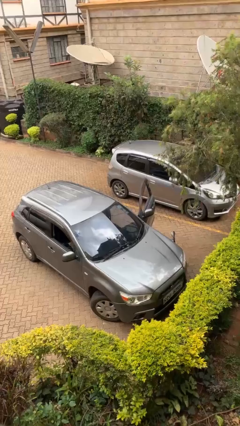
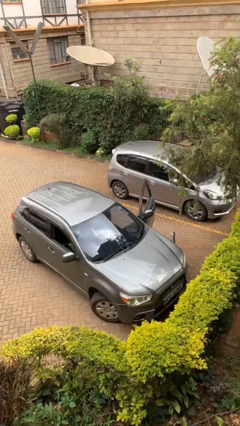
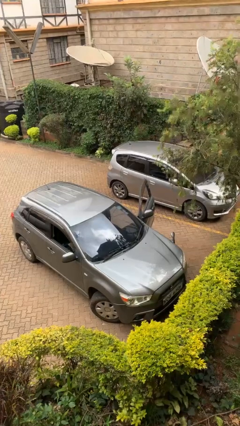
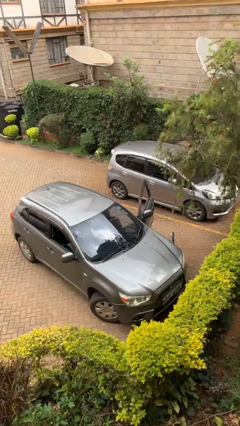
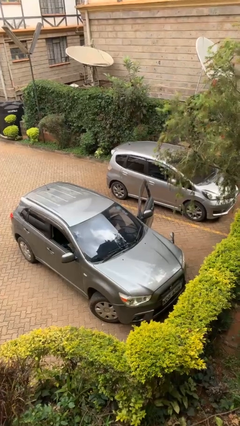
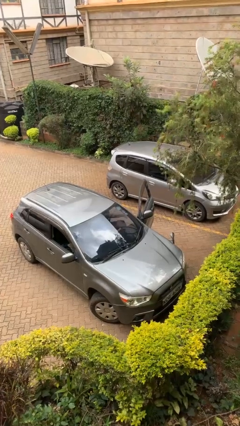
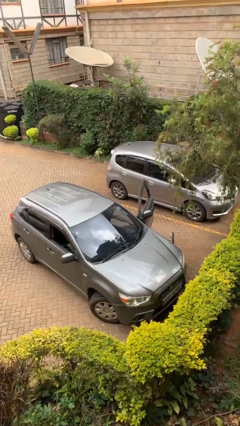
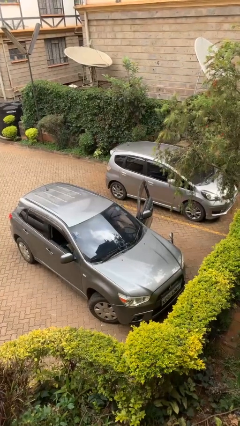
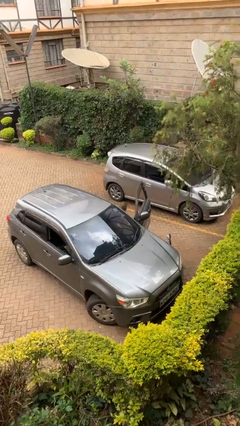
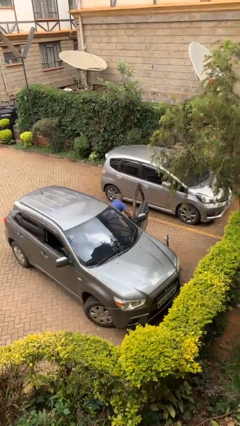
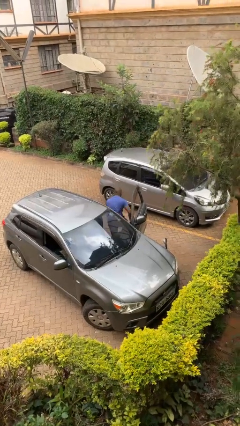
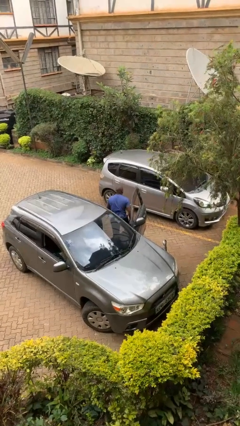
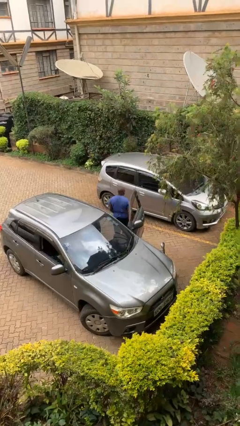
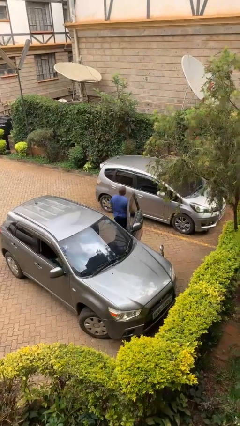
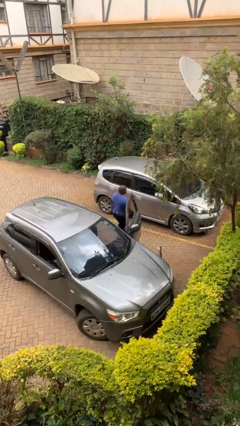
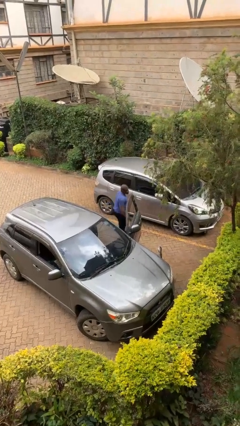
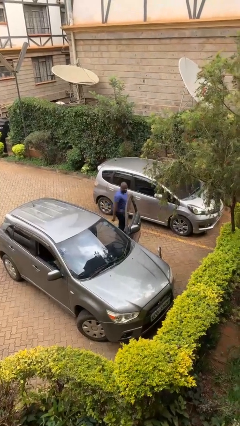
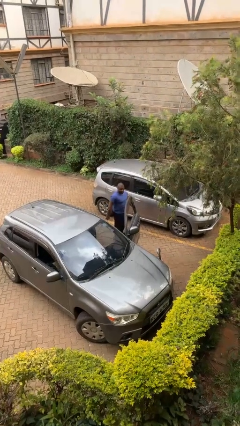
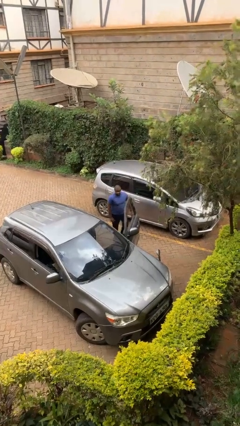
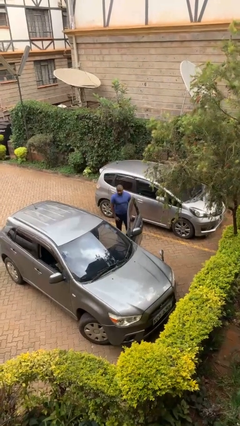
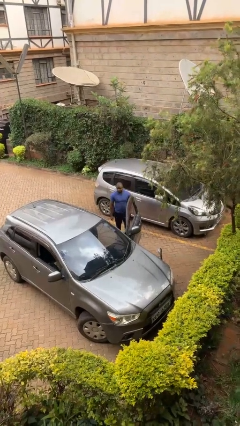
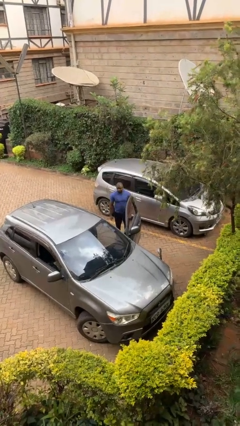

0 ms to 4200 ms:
person exits car

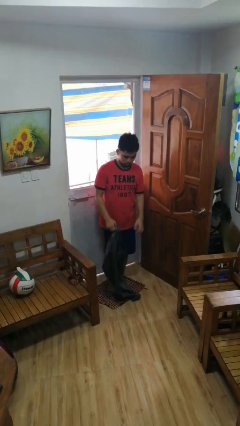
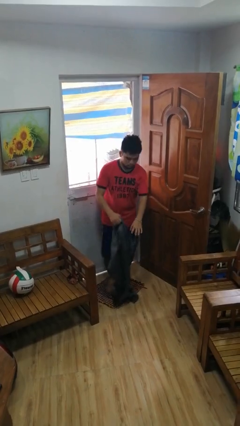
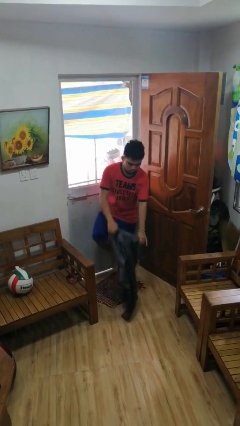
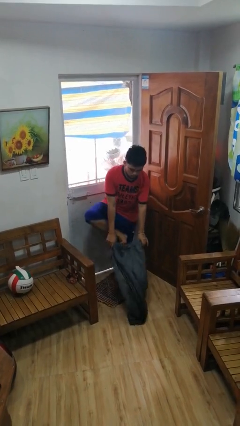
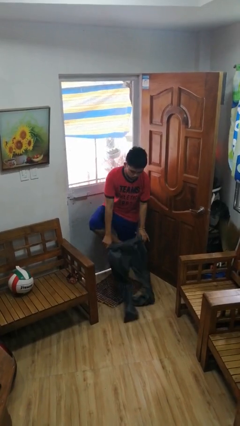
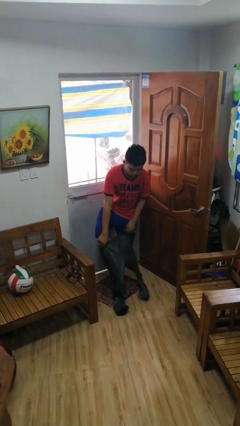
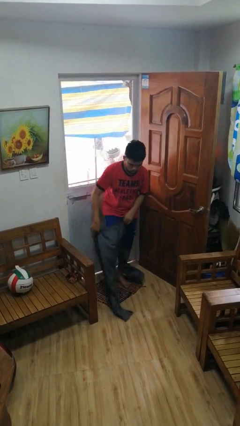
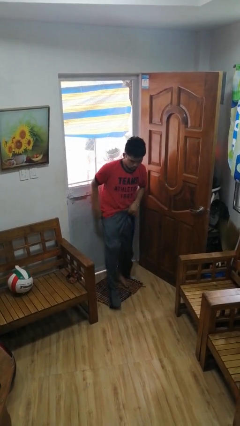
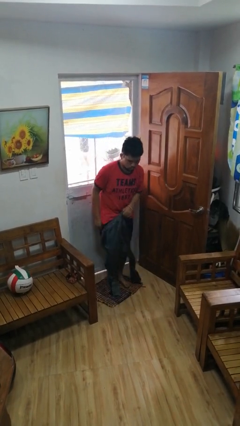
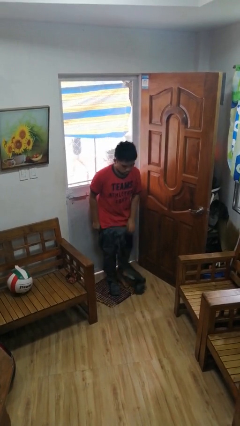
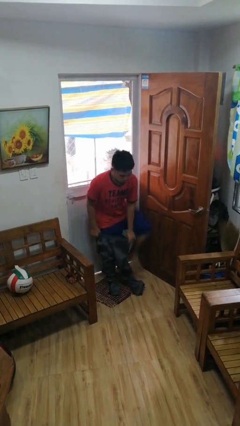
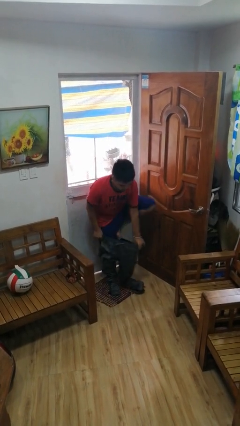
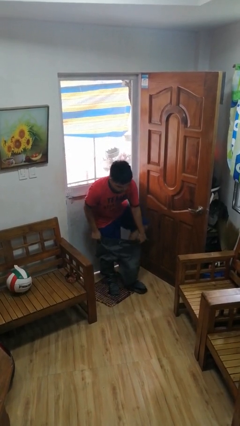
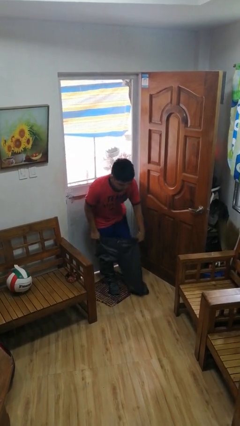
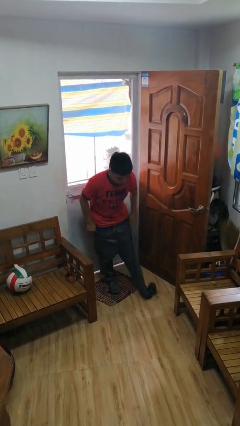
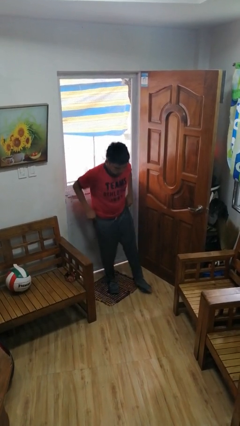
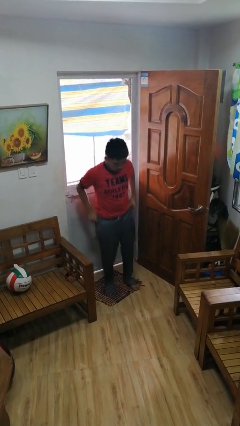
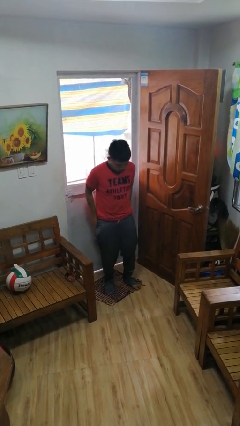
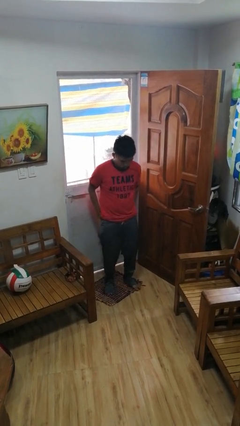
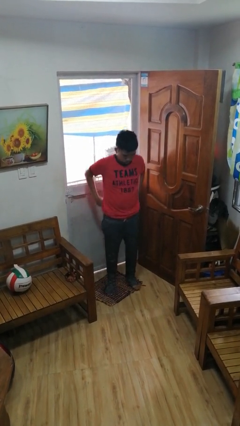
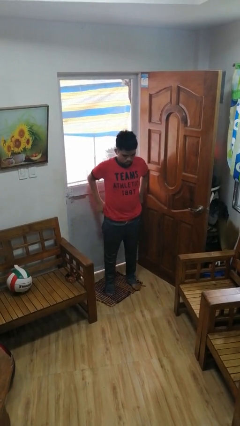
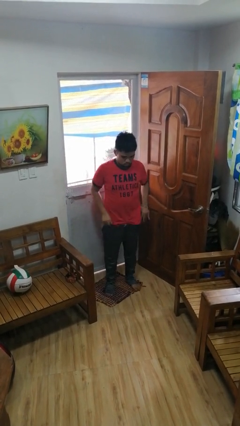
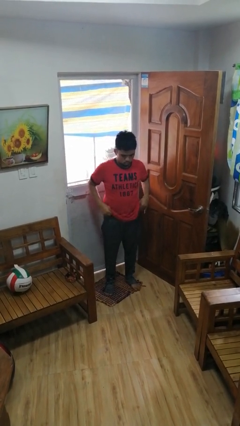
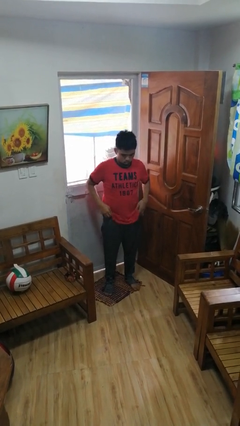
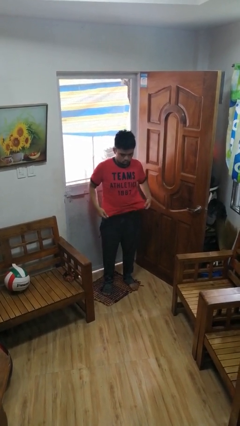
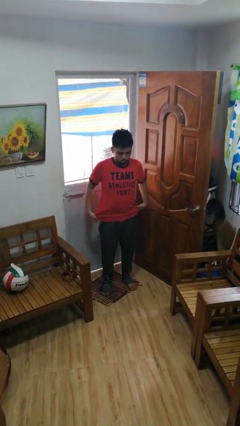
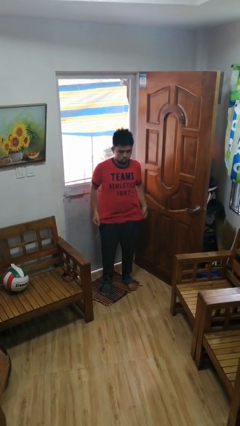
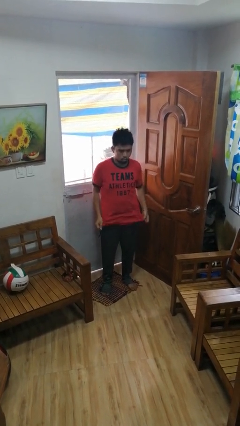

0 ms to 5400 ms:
person puts on pants

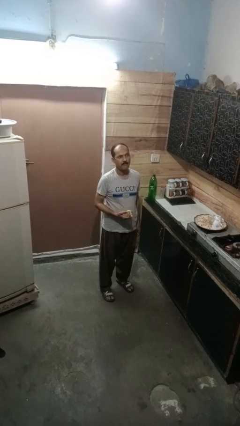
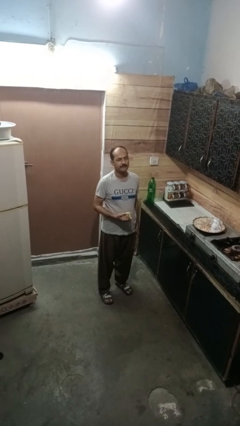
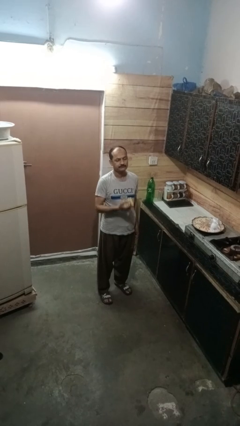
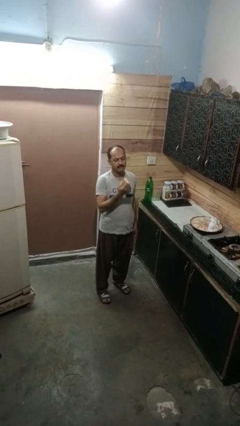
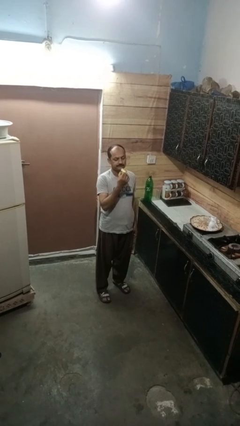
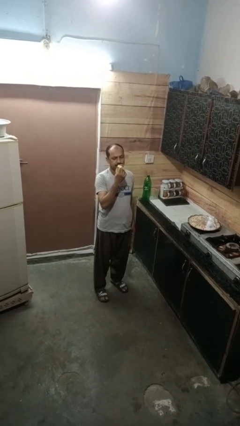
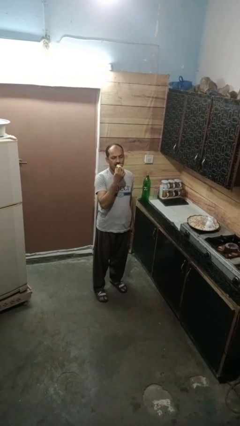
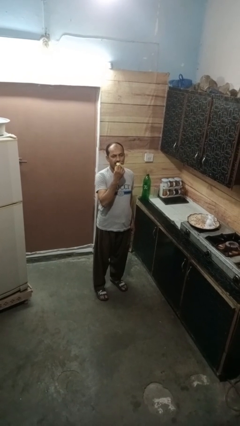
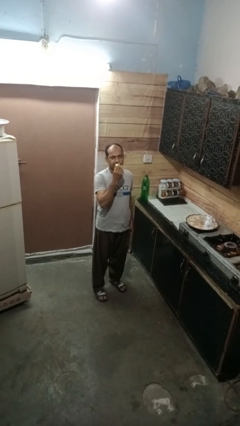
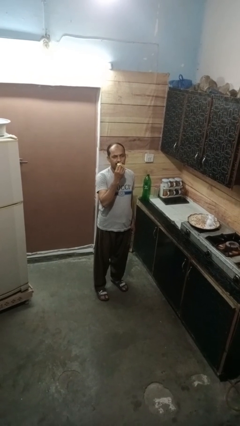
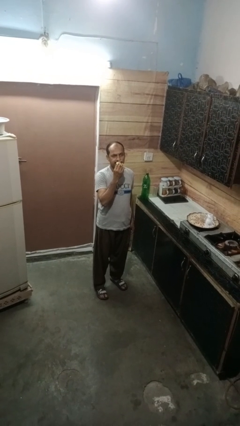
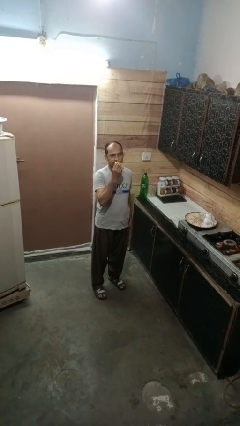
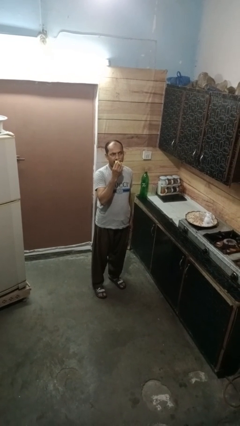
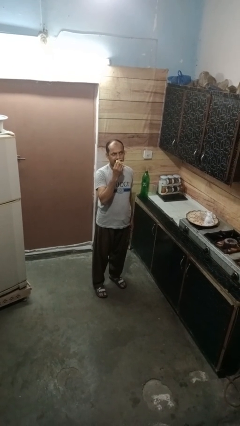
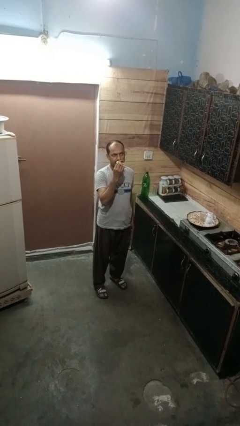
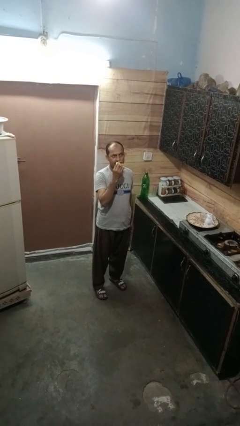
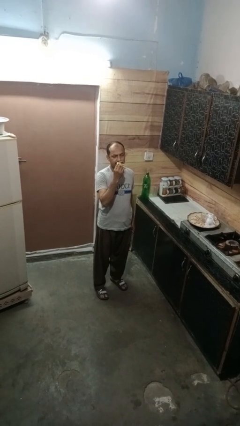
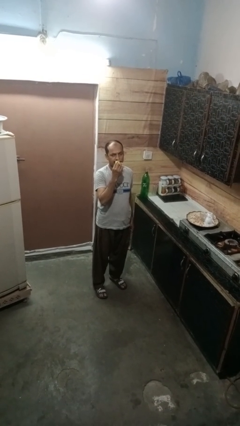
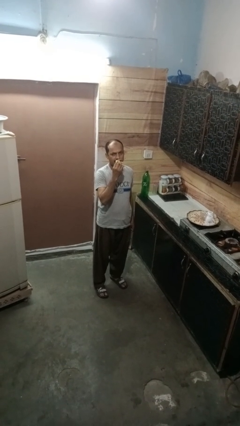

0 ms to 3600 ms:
person eats banana

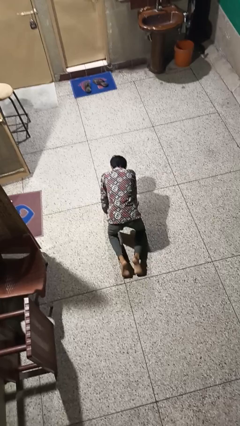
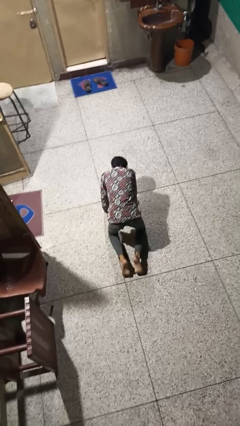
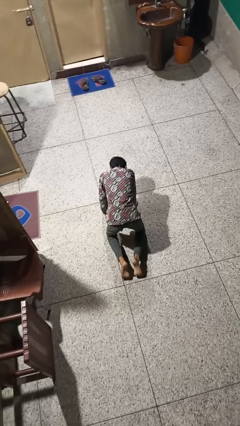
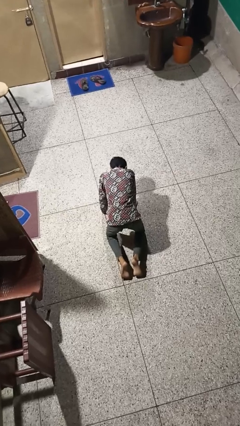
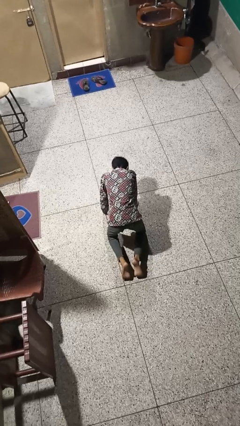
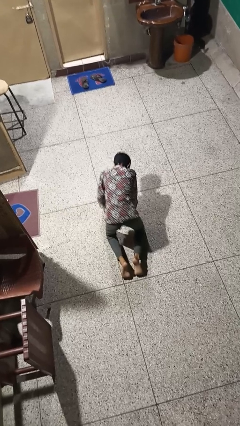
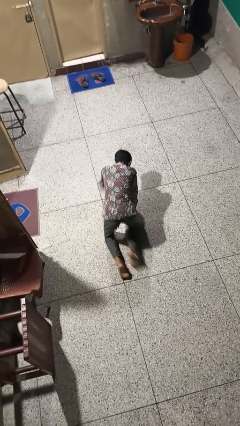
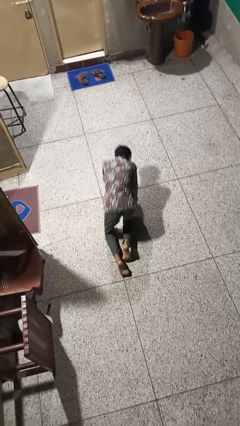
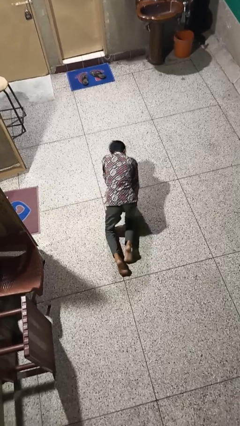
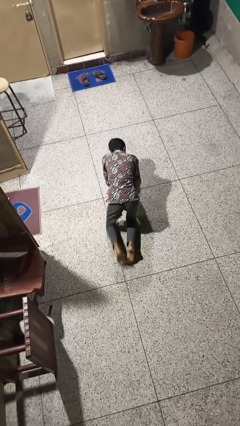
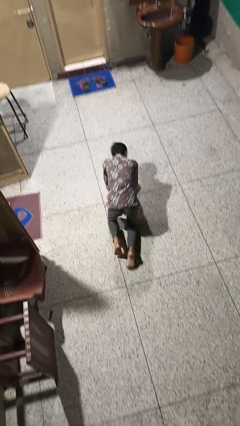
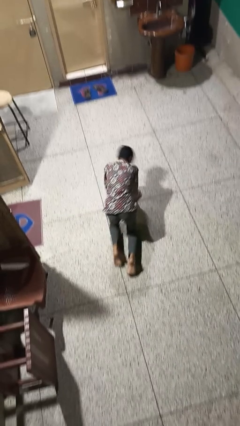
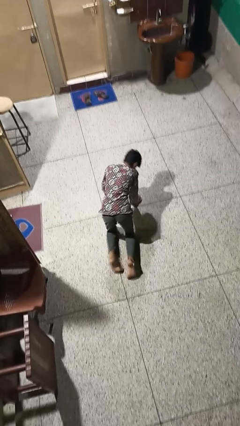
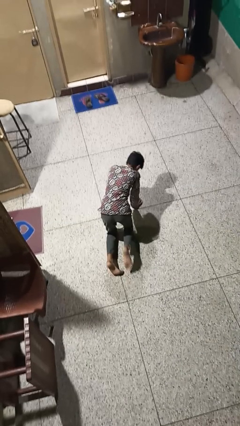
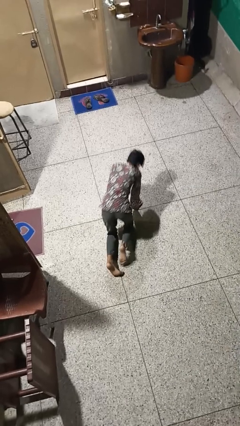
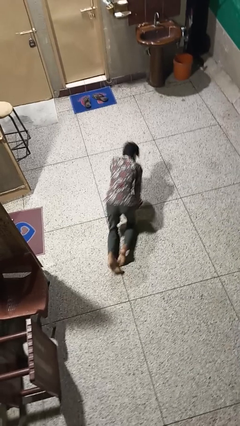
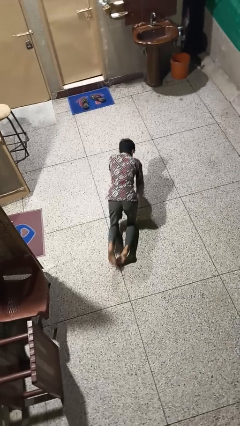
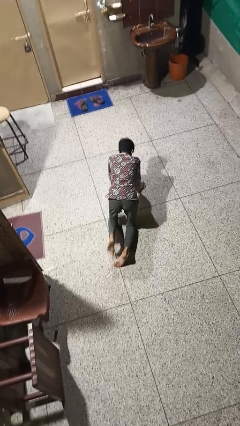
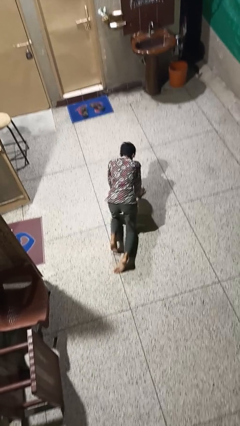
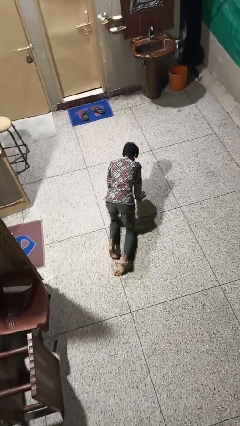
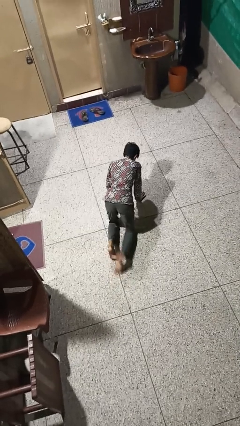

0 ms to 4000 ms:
person crawls

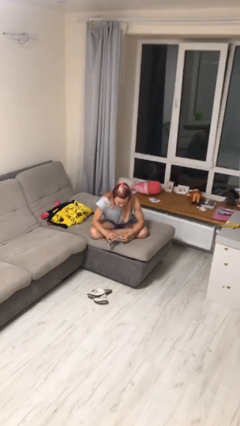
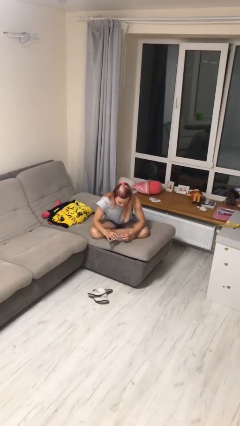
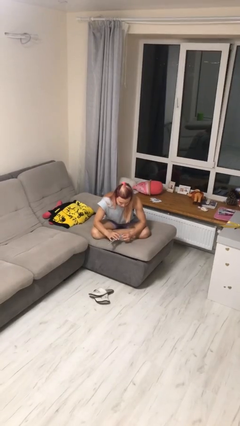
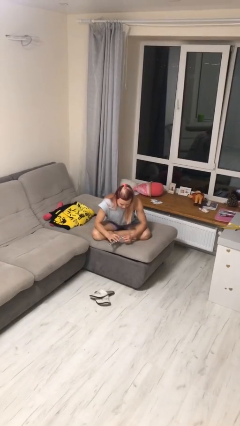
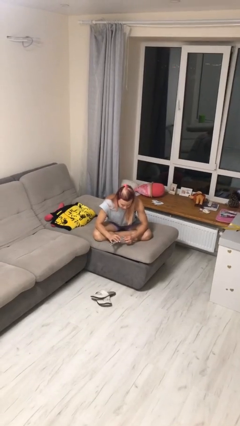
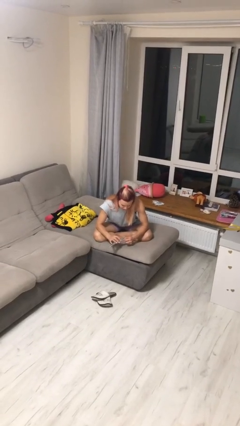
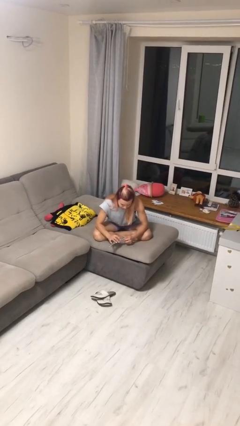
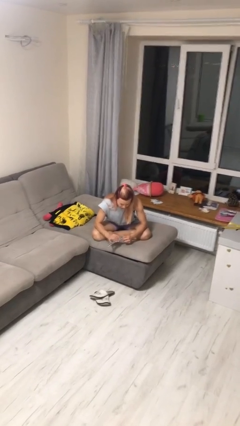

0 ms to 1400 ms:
person files fingernails
